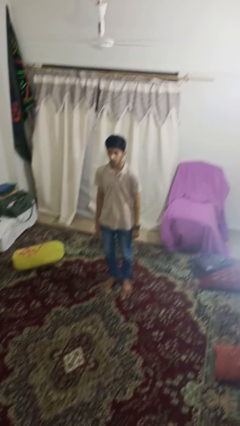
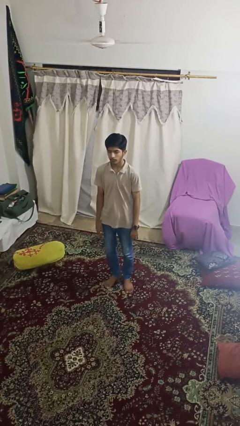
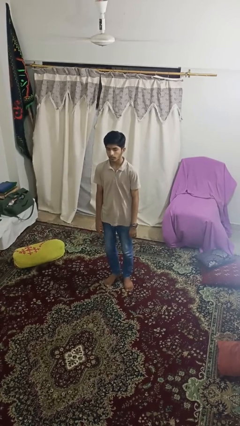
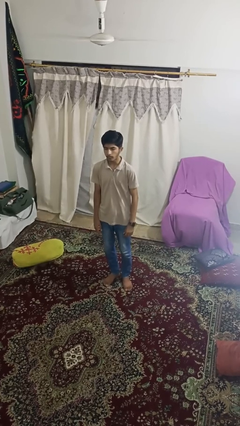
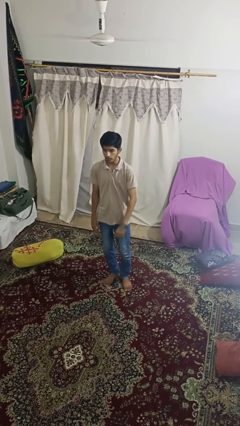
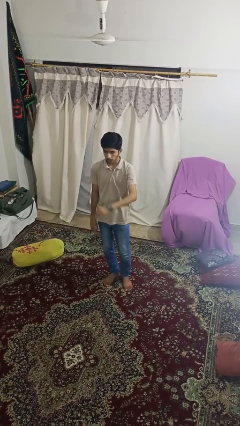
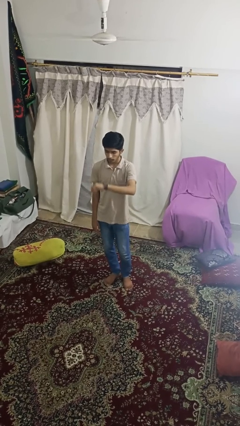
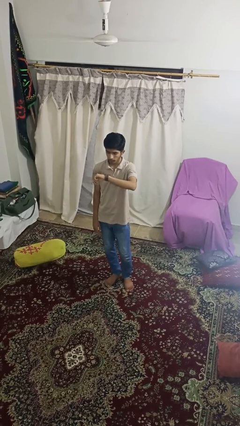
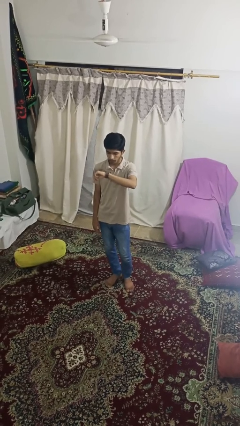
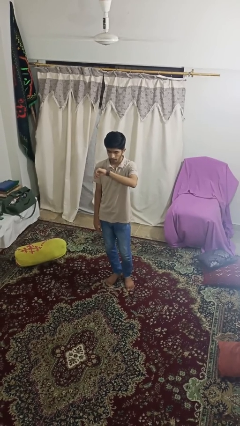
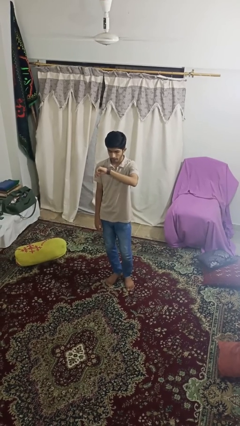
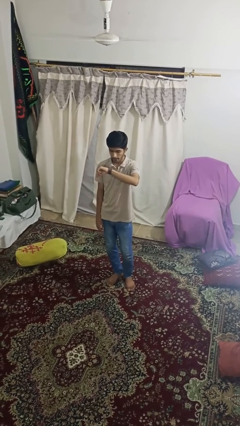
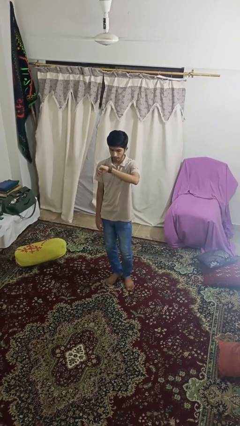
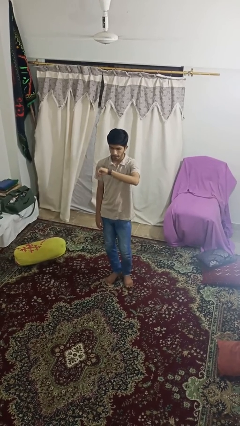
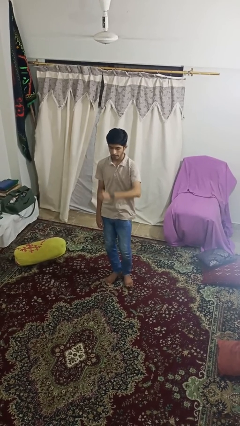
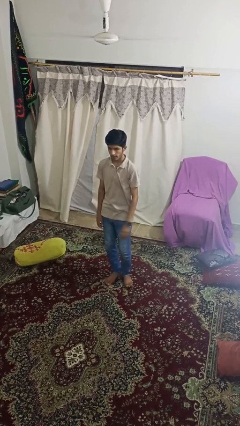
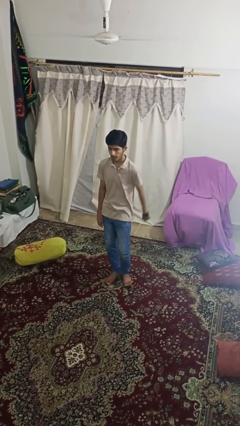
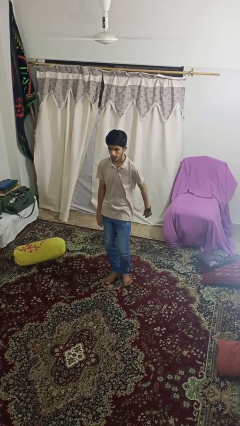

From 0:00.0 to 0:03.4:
person looks at wristwatch

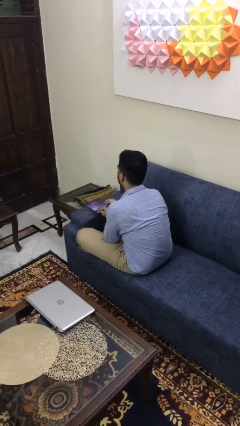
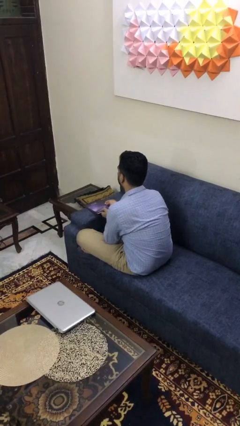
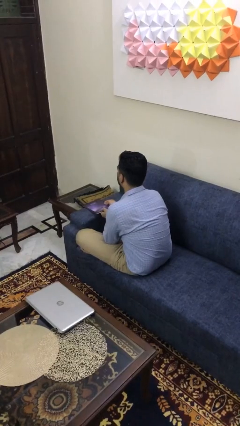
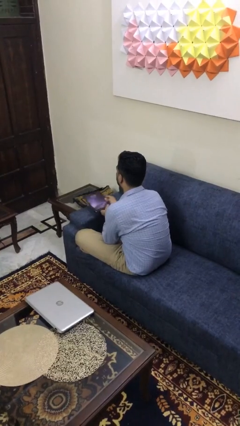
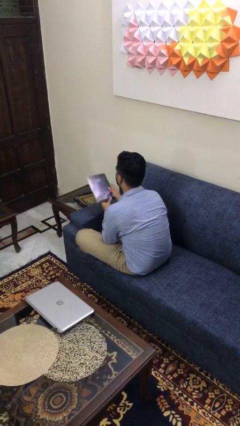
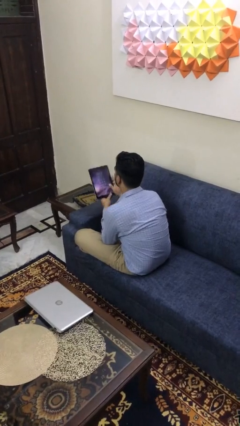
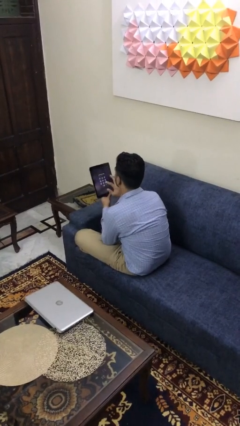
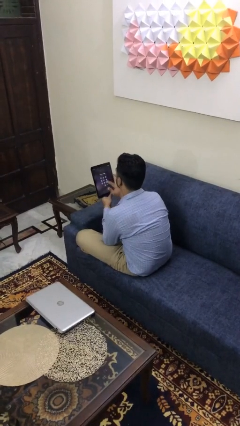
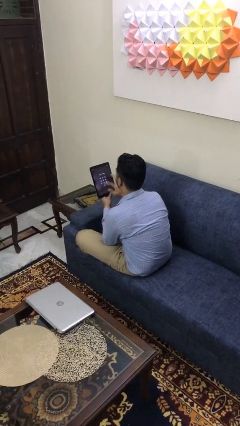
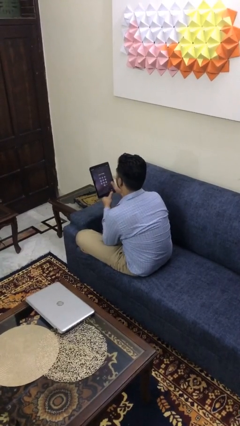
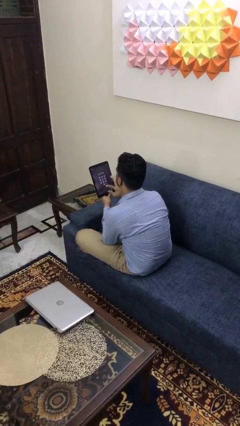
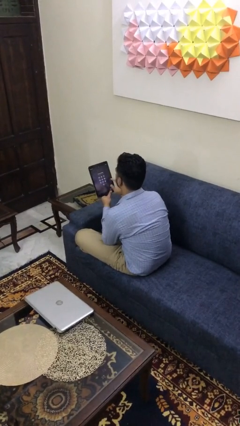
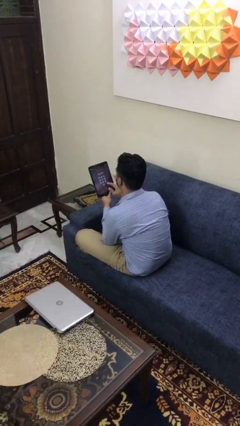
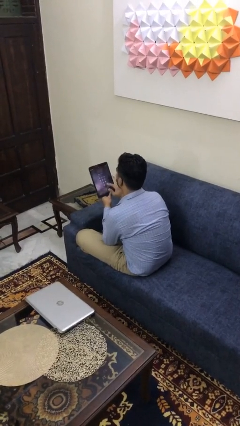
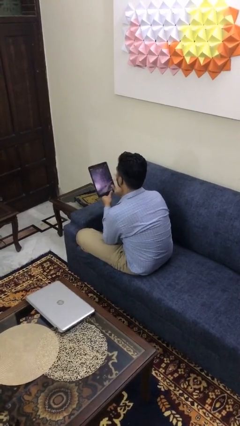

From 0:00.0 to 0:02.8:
person interacts with tablet

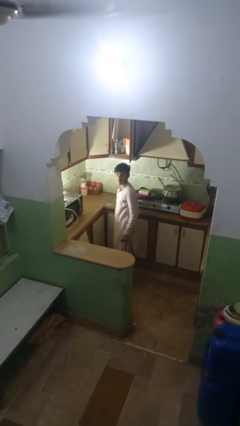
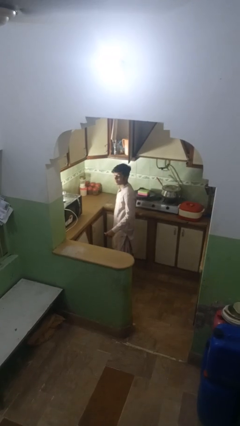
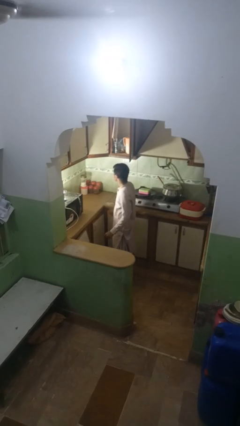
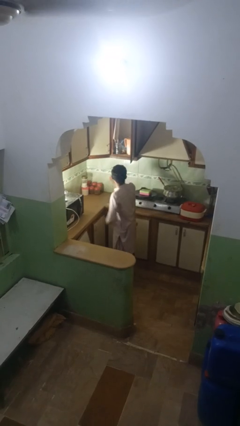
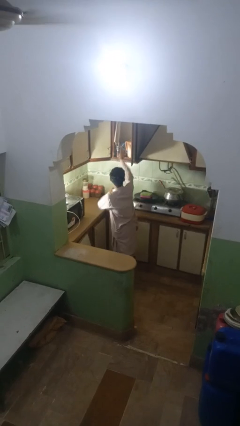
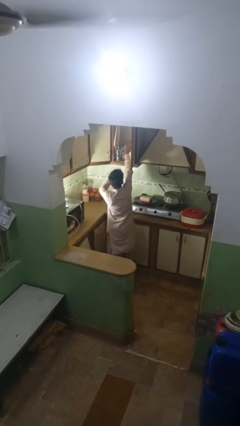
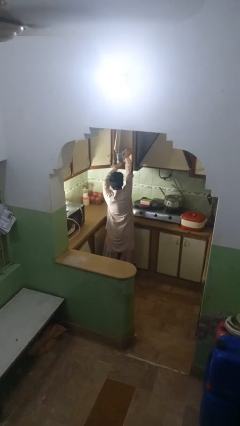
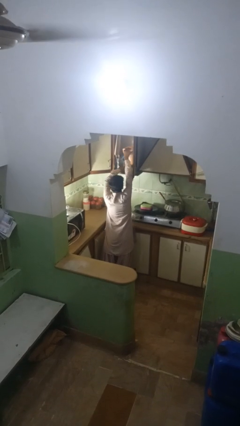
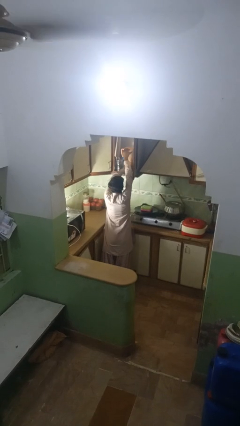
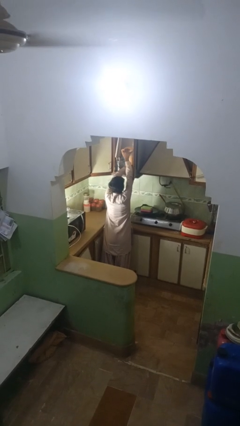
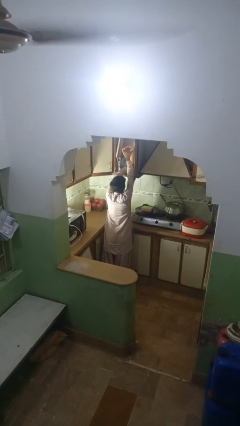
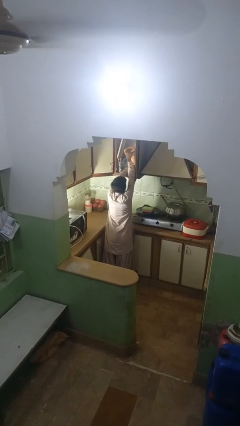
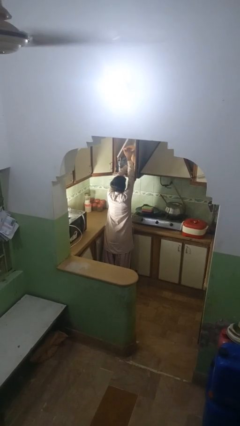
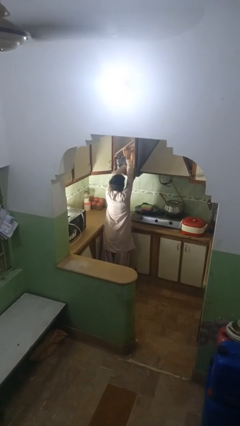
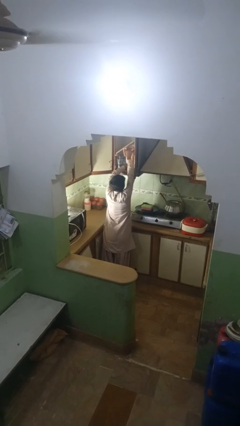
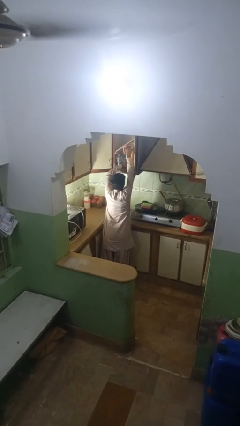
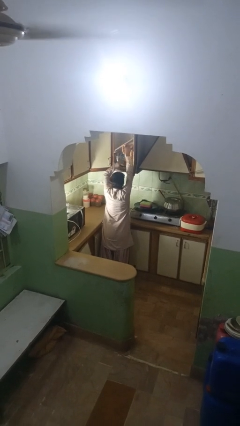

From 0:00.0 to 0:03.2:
person searches in kitchen drawer

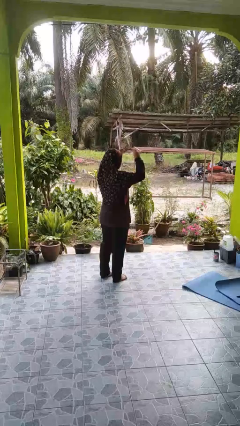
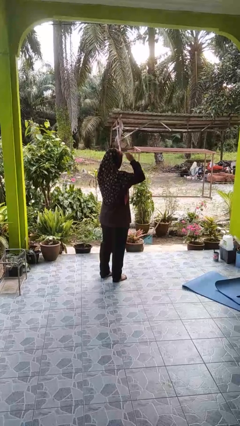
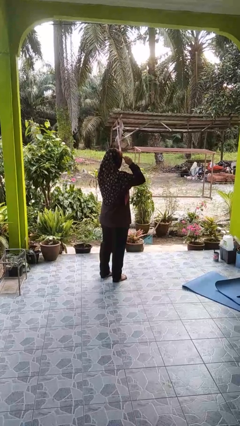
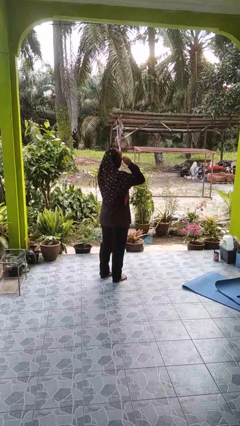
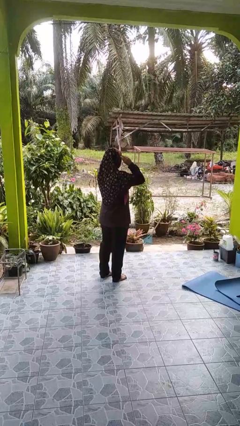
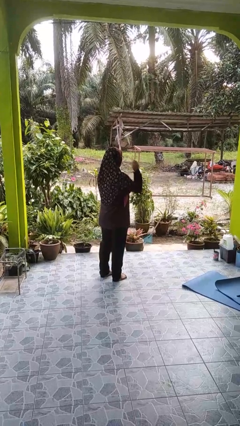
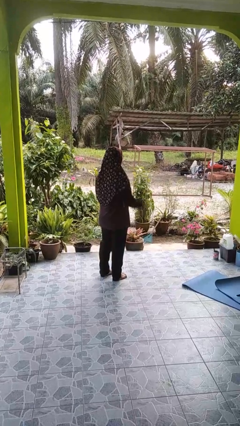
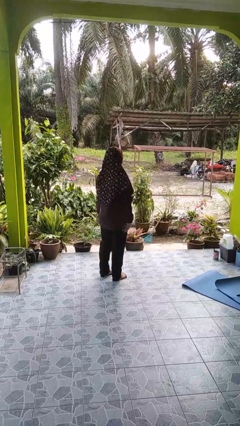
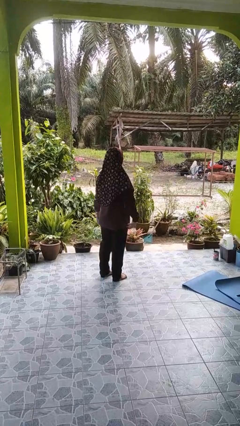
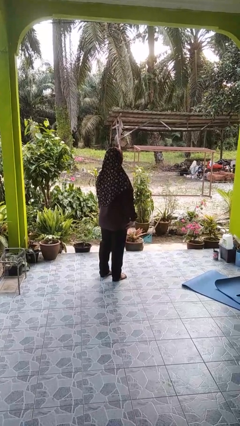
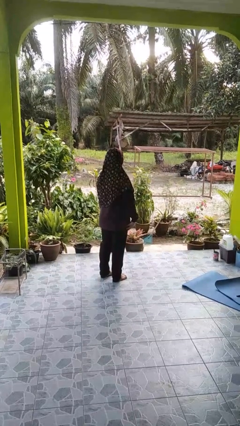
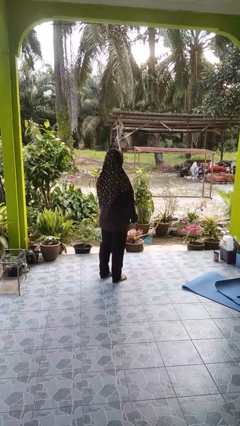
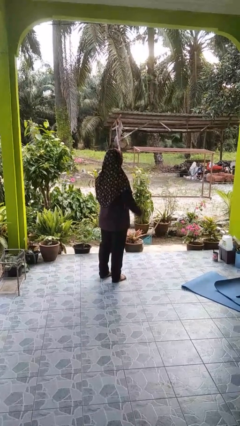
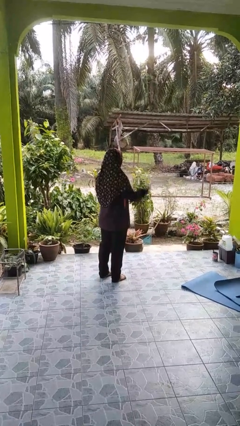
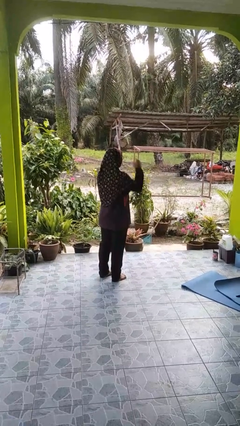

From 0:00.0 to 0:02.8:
person puts on glasses

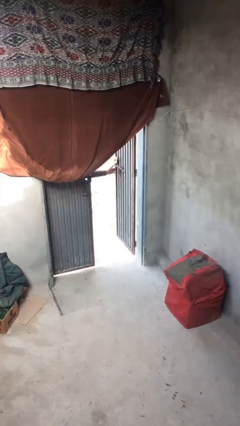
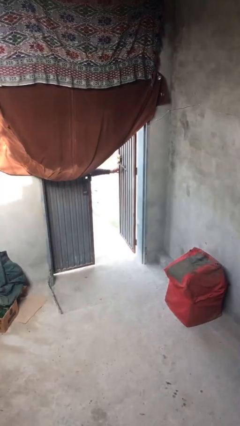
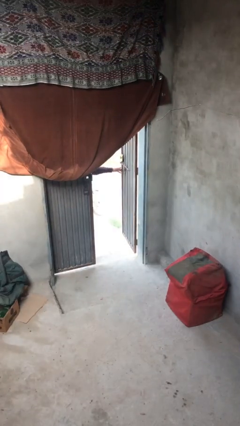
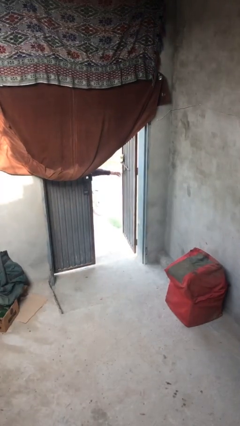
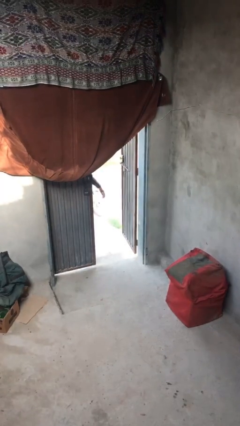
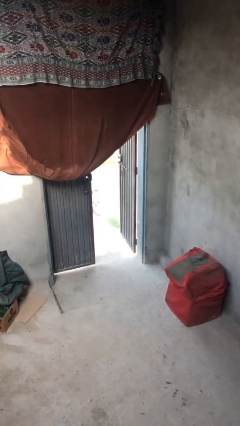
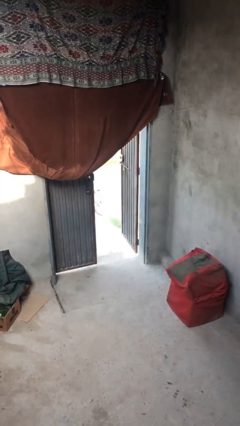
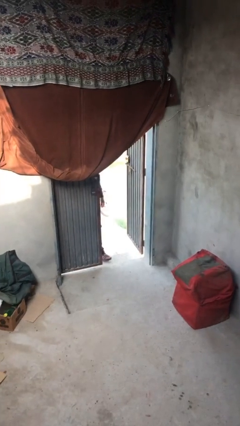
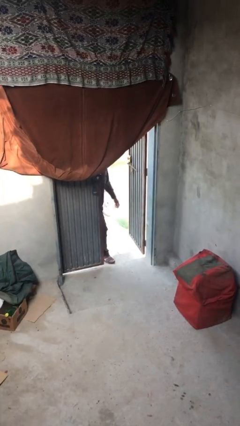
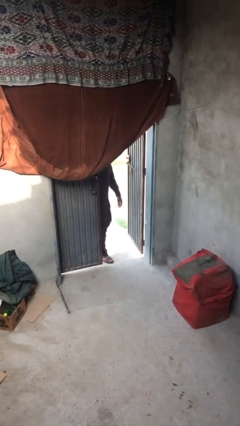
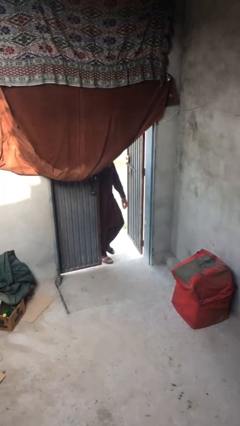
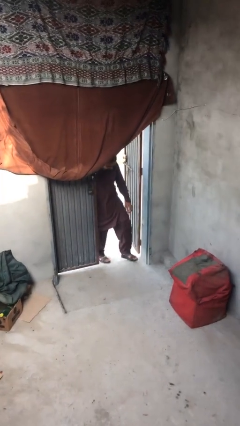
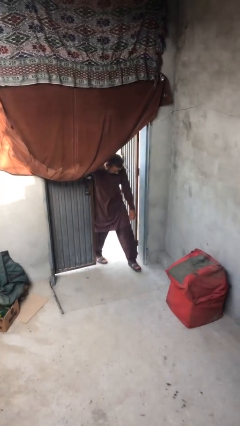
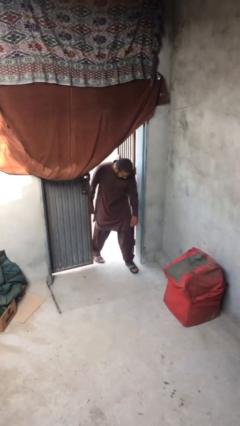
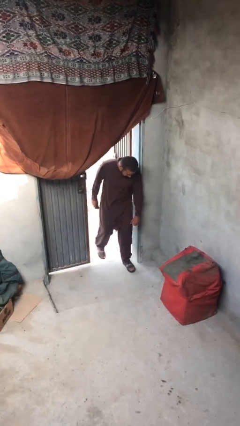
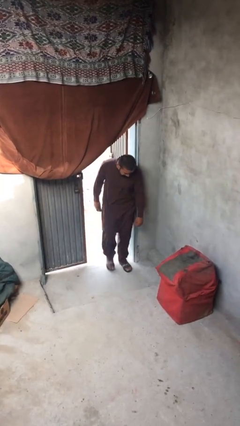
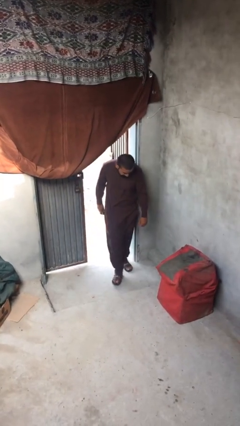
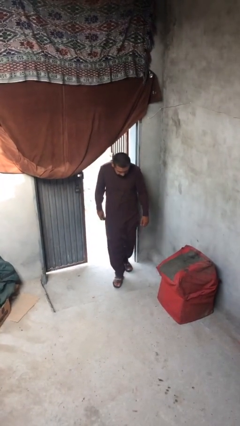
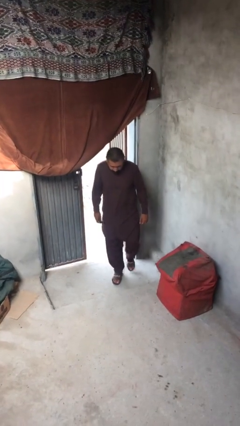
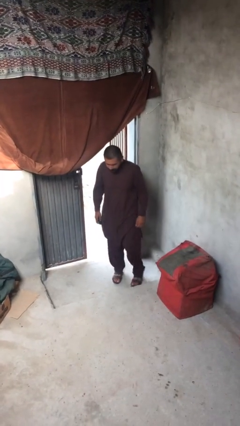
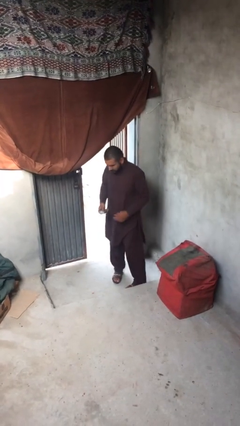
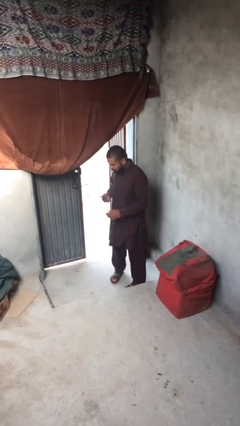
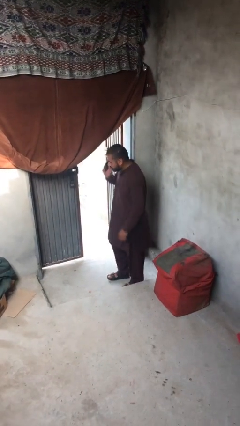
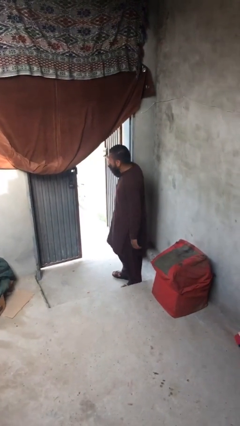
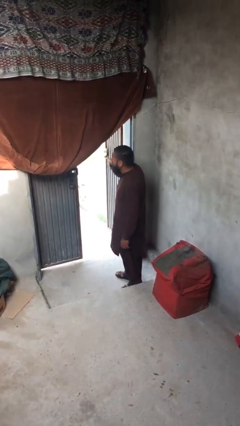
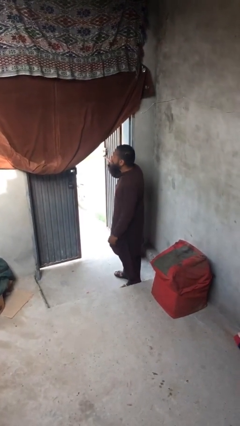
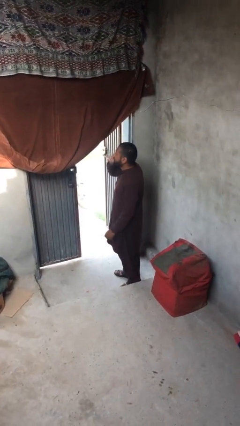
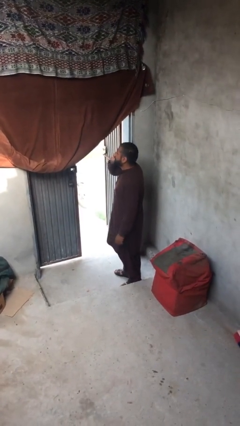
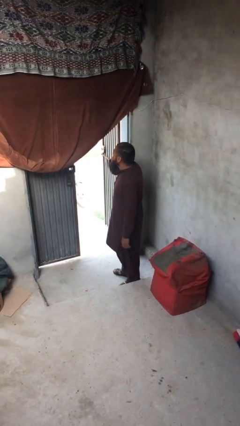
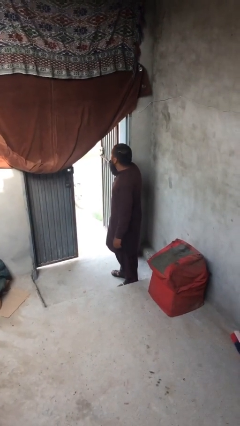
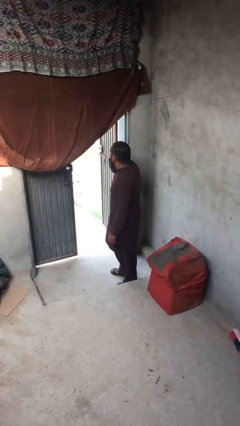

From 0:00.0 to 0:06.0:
person enters scene through structure
